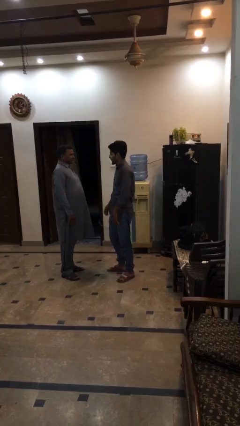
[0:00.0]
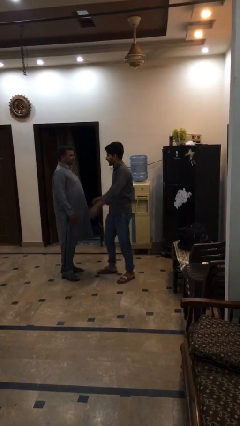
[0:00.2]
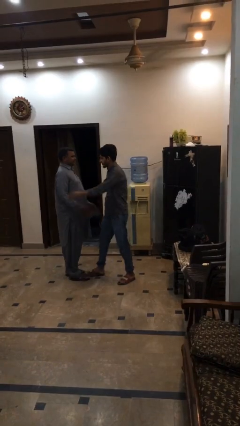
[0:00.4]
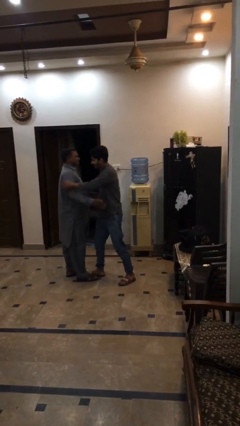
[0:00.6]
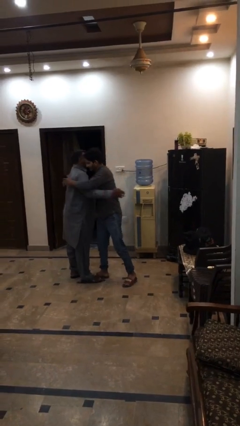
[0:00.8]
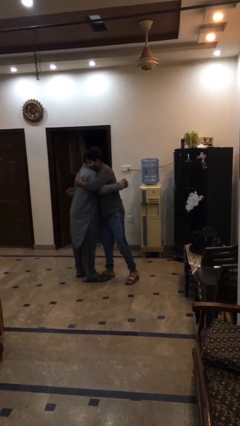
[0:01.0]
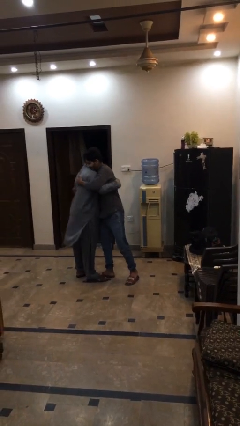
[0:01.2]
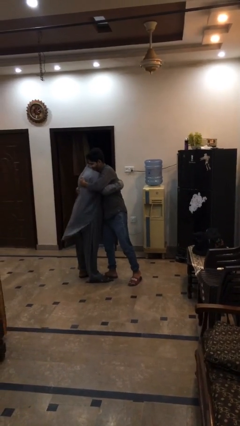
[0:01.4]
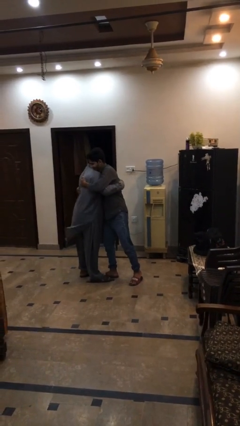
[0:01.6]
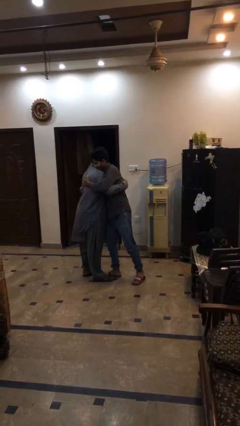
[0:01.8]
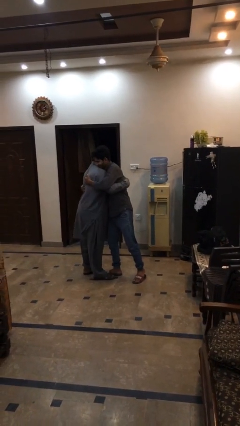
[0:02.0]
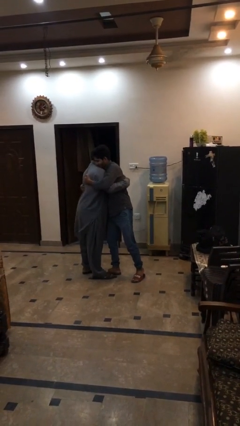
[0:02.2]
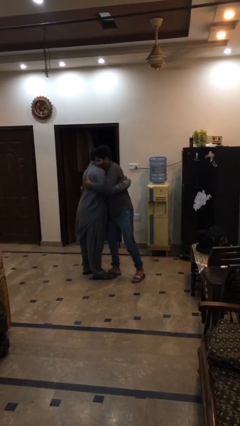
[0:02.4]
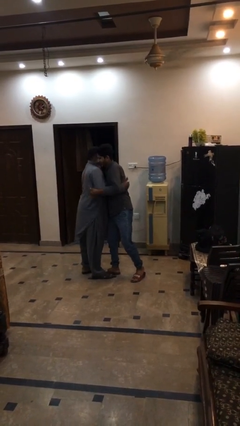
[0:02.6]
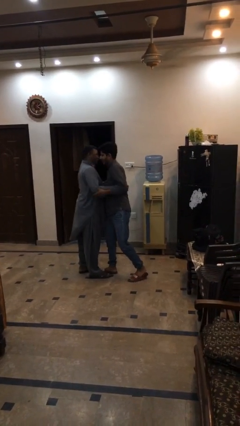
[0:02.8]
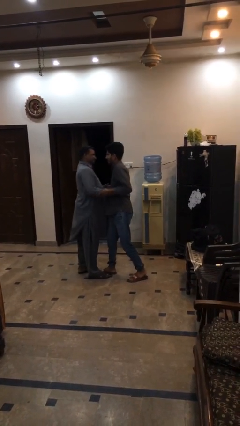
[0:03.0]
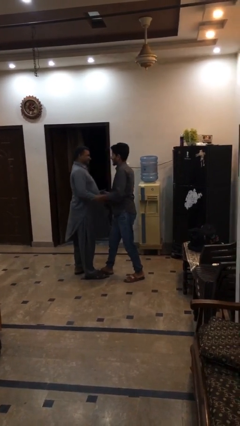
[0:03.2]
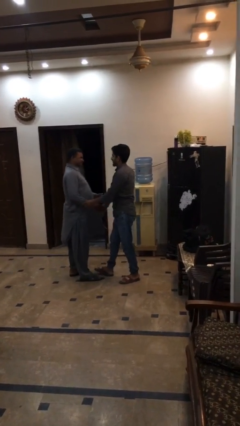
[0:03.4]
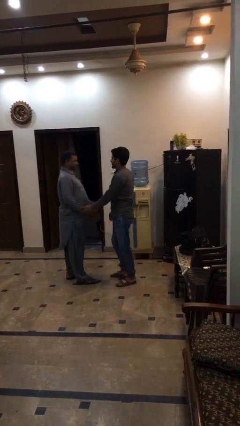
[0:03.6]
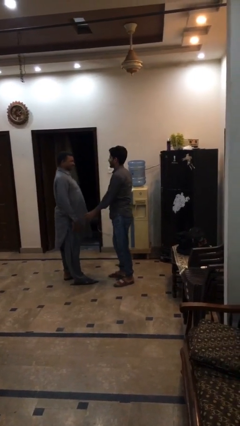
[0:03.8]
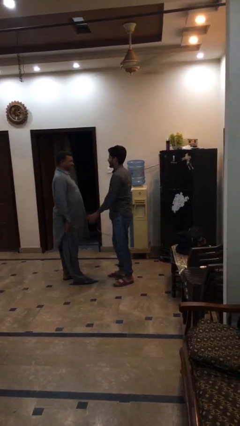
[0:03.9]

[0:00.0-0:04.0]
person embraces person

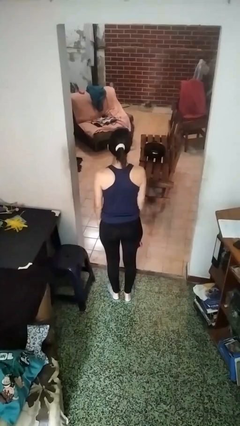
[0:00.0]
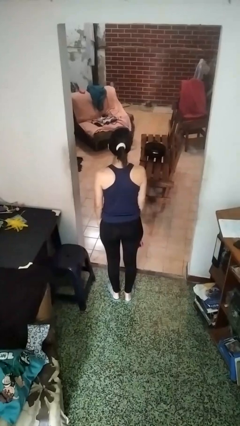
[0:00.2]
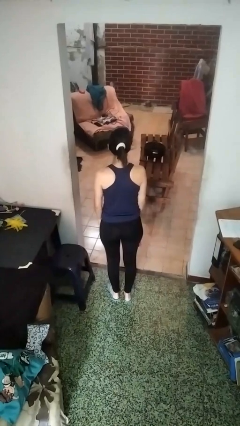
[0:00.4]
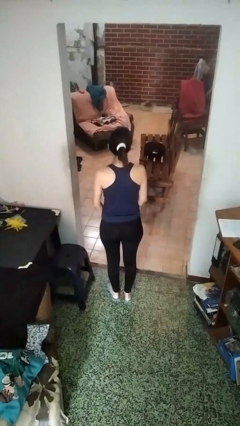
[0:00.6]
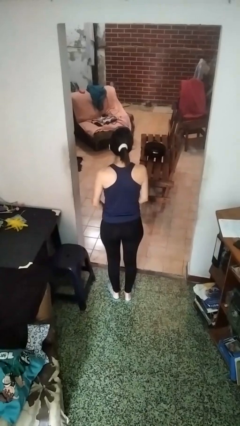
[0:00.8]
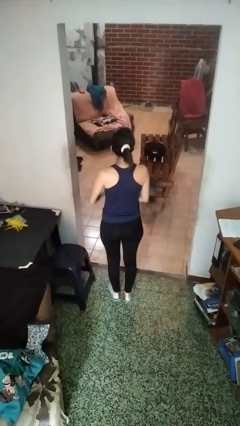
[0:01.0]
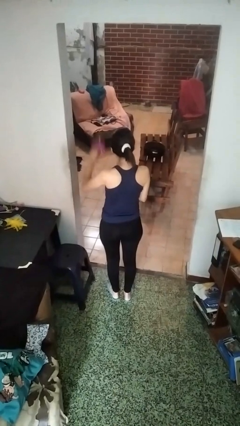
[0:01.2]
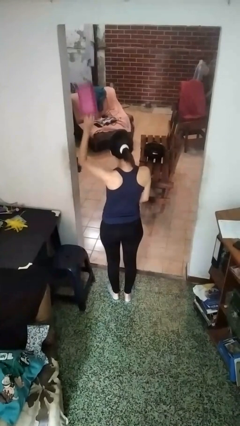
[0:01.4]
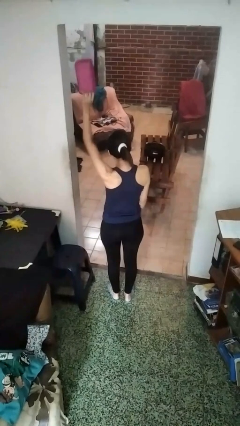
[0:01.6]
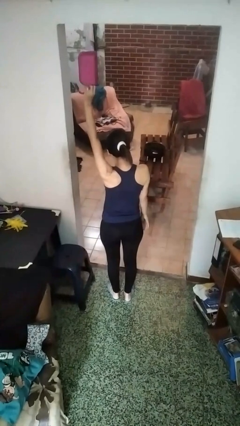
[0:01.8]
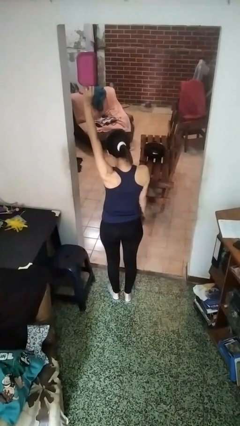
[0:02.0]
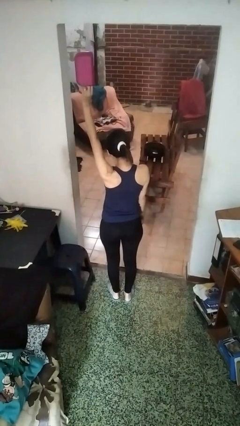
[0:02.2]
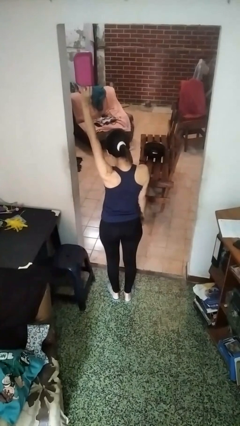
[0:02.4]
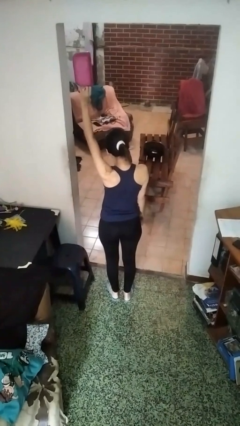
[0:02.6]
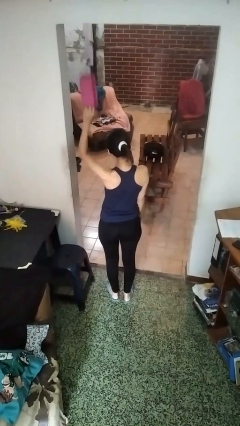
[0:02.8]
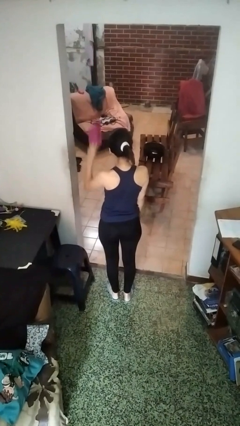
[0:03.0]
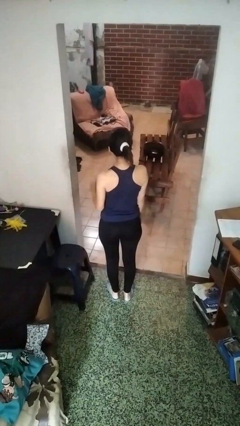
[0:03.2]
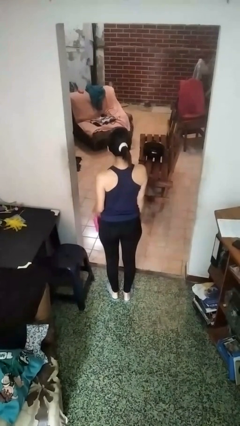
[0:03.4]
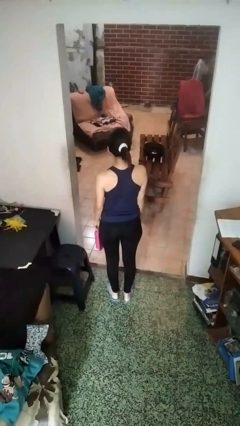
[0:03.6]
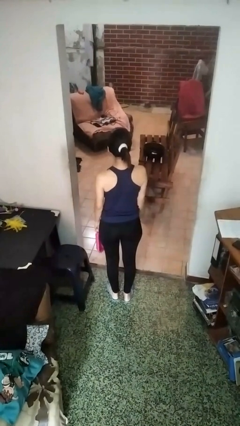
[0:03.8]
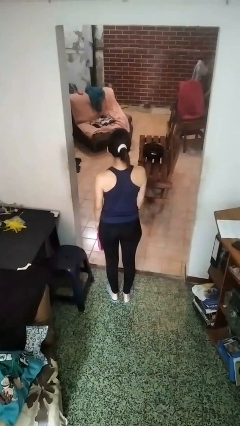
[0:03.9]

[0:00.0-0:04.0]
person holds object above head

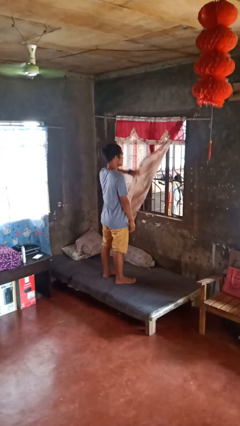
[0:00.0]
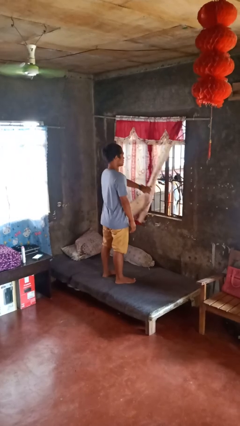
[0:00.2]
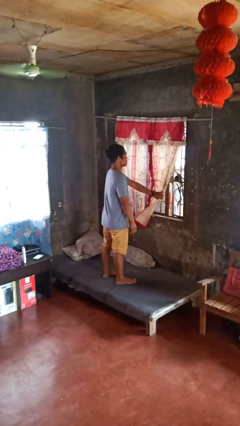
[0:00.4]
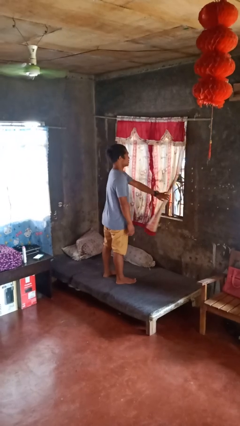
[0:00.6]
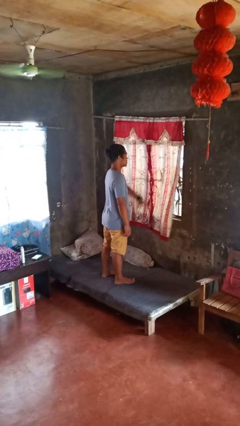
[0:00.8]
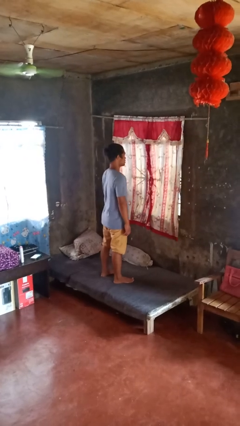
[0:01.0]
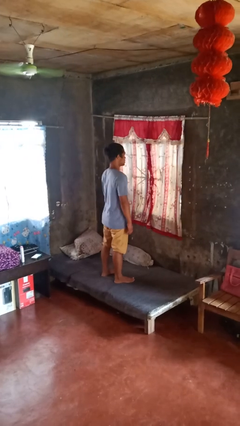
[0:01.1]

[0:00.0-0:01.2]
person closes curtains

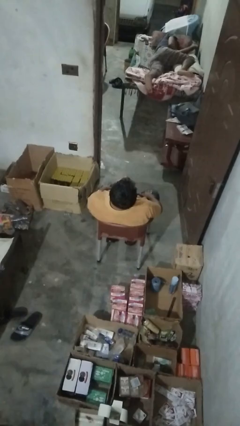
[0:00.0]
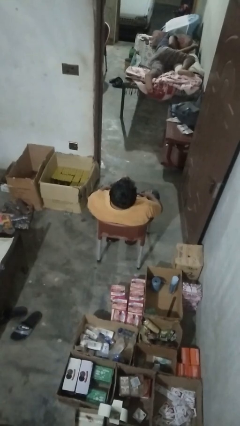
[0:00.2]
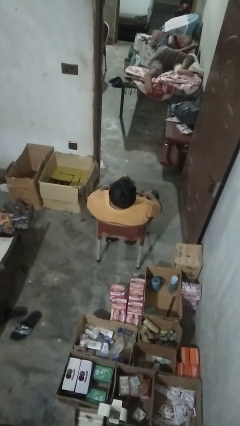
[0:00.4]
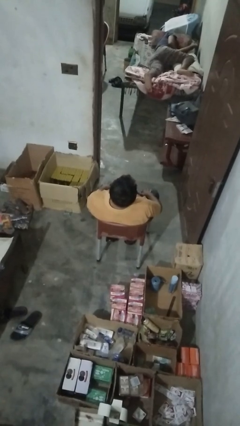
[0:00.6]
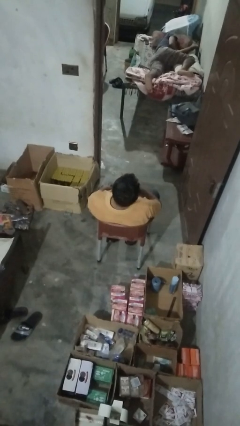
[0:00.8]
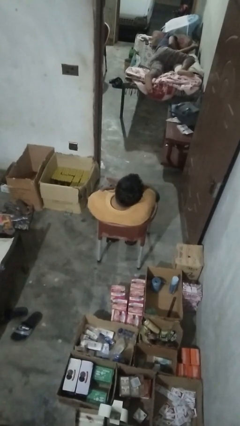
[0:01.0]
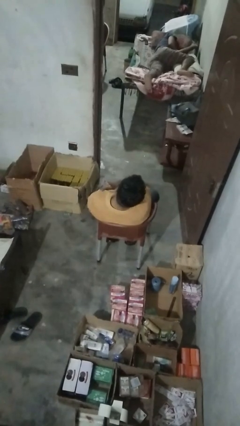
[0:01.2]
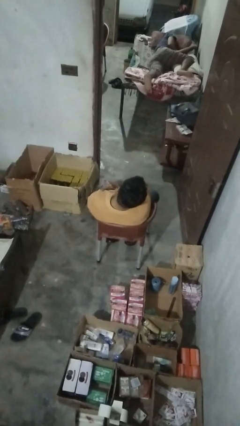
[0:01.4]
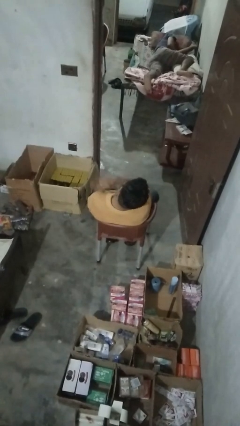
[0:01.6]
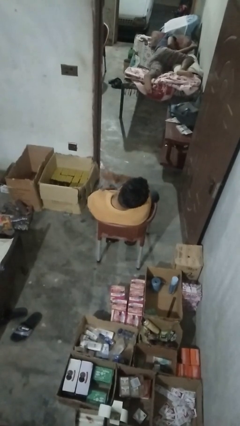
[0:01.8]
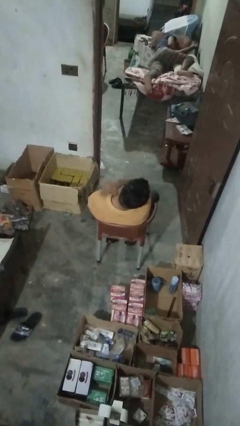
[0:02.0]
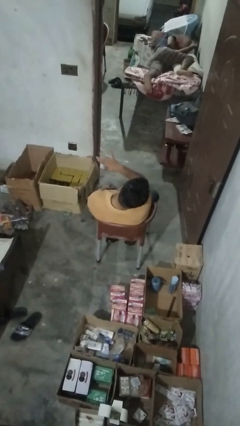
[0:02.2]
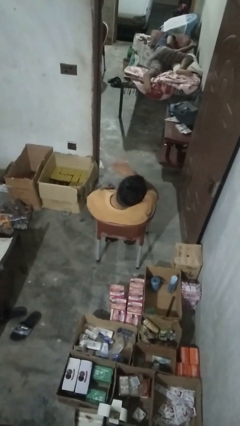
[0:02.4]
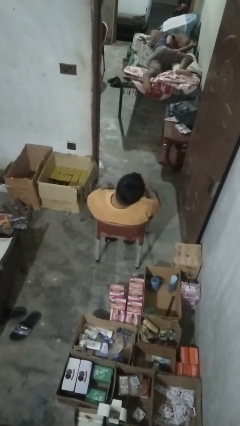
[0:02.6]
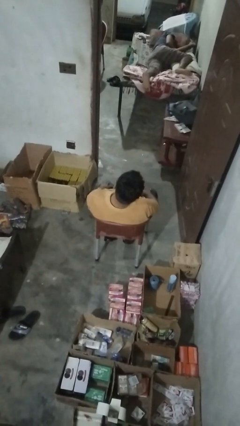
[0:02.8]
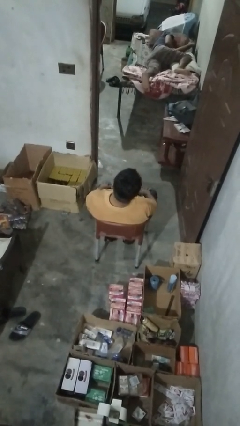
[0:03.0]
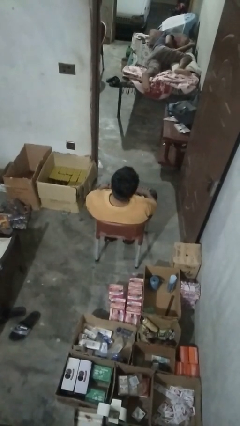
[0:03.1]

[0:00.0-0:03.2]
person swats bug

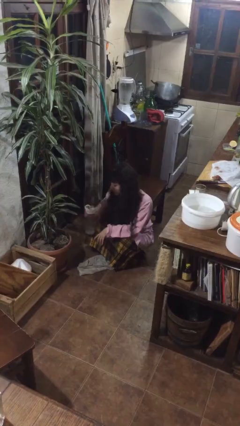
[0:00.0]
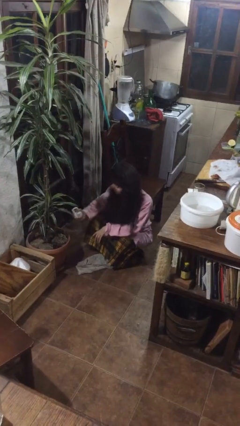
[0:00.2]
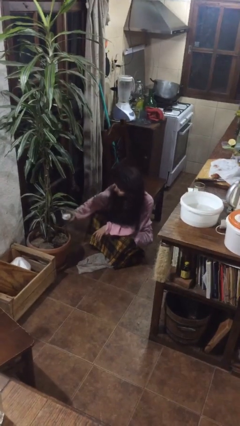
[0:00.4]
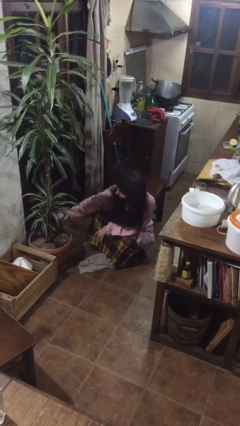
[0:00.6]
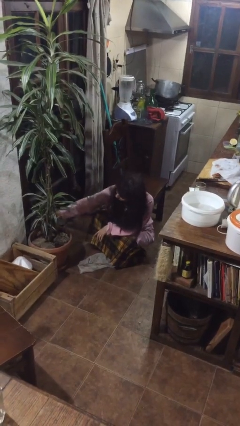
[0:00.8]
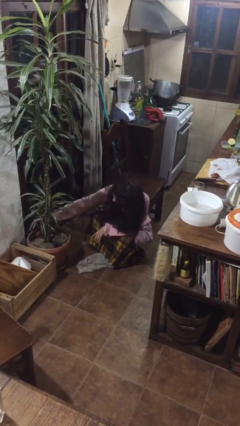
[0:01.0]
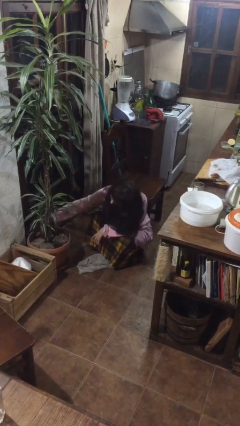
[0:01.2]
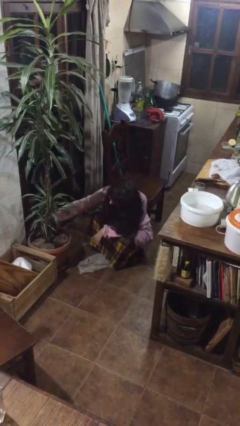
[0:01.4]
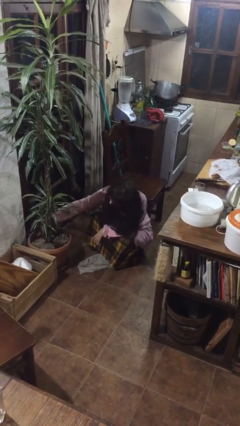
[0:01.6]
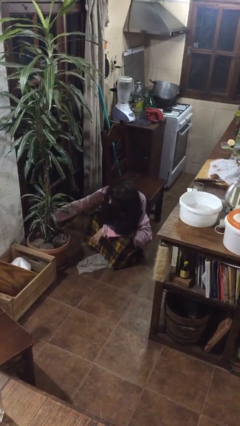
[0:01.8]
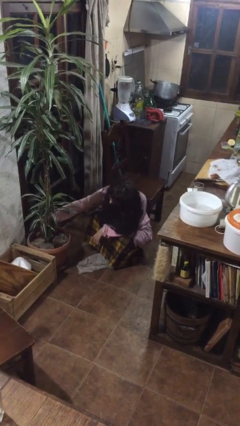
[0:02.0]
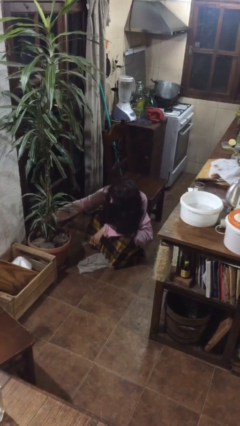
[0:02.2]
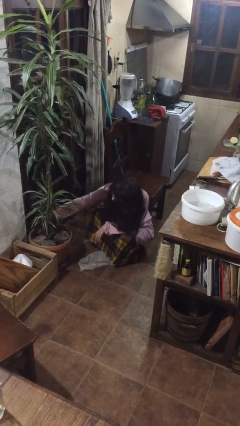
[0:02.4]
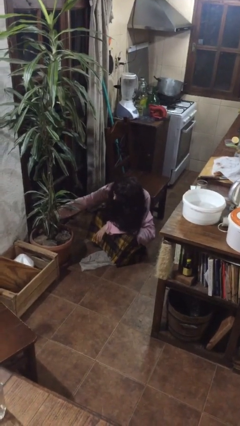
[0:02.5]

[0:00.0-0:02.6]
person waters houseplant

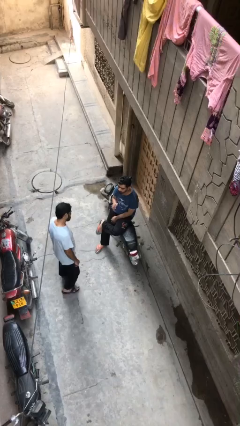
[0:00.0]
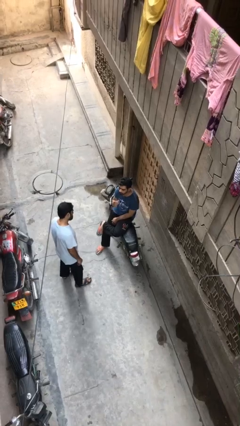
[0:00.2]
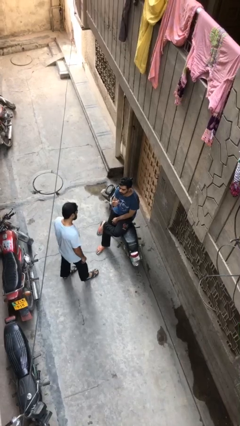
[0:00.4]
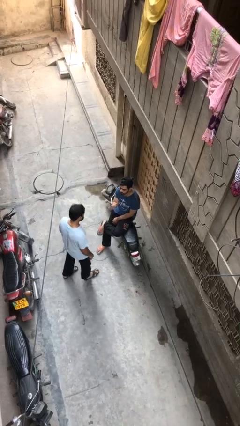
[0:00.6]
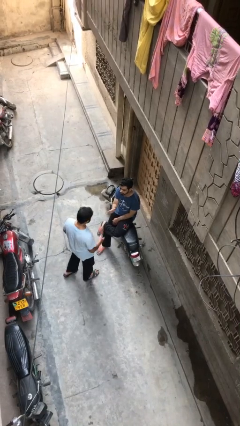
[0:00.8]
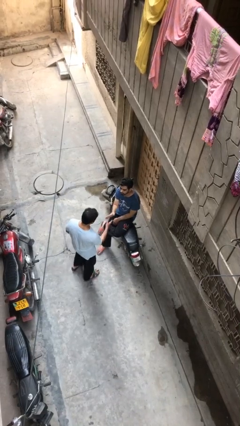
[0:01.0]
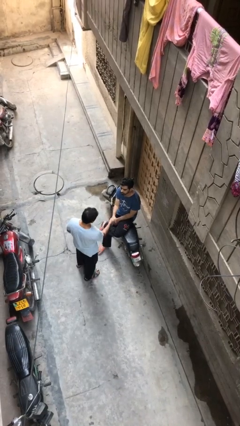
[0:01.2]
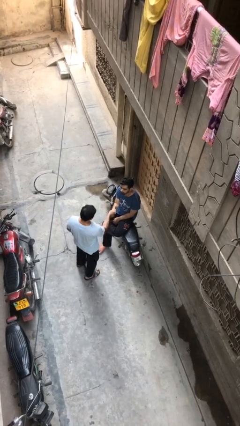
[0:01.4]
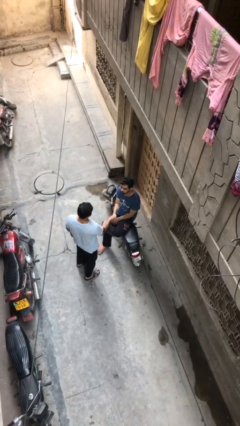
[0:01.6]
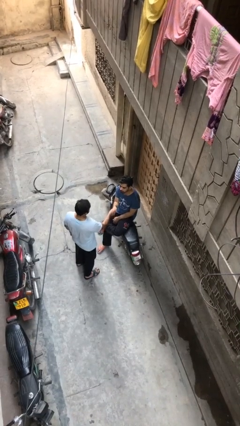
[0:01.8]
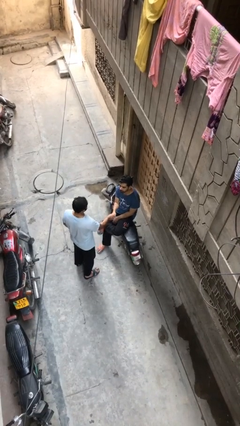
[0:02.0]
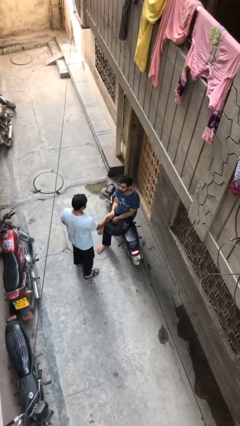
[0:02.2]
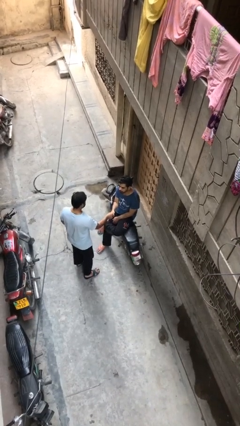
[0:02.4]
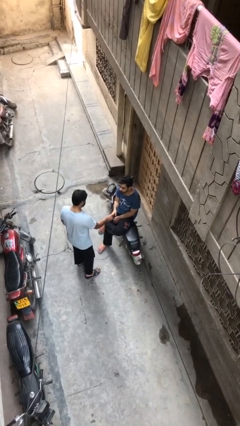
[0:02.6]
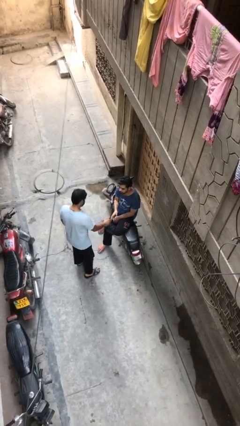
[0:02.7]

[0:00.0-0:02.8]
person shakes hand
